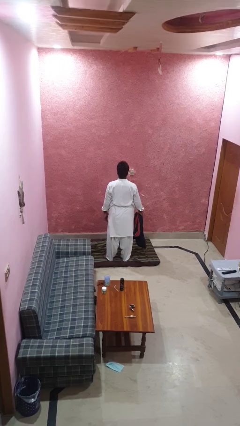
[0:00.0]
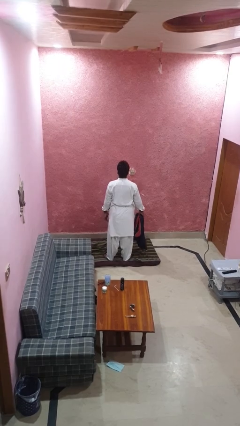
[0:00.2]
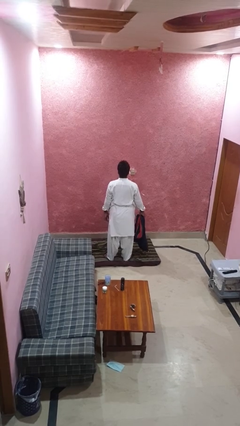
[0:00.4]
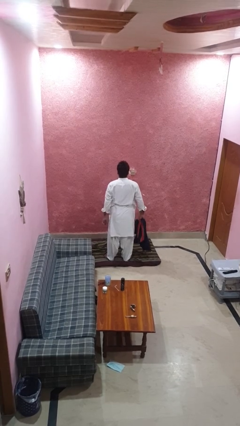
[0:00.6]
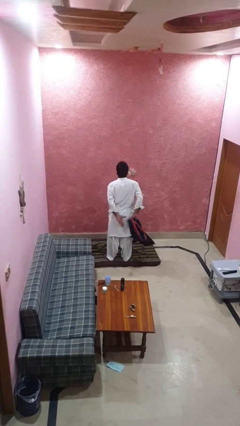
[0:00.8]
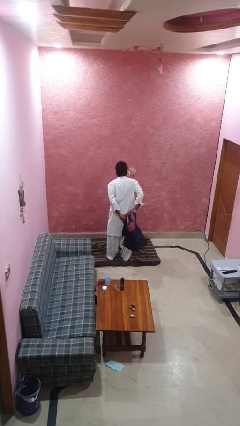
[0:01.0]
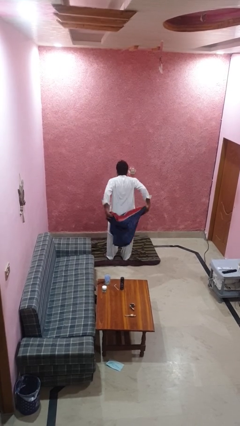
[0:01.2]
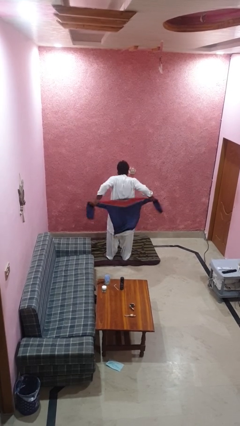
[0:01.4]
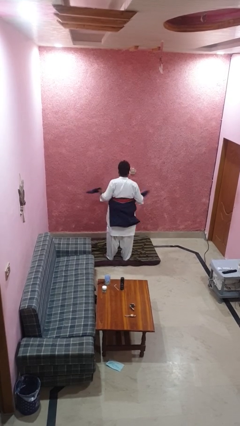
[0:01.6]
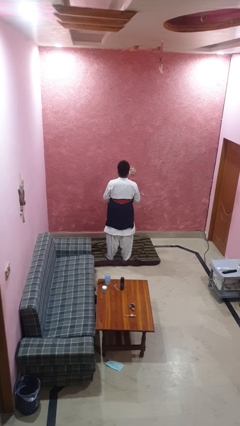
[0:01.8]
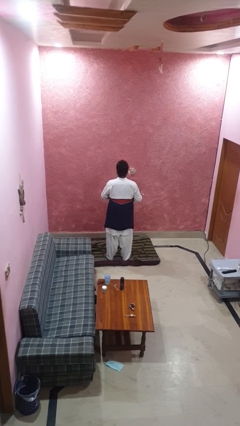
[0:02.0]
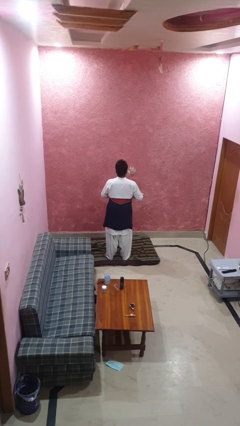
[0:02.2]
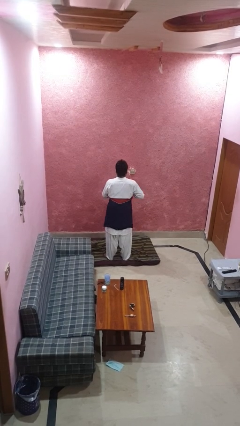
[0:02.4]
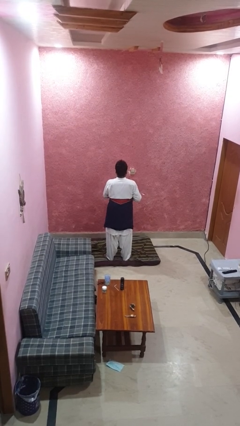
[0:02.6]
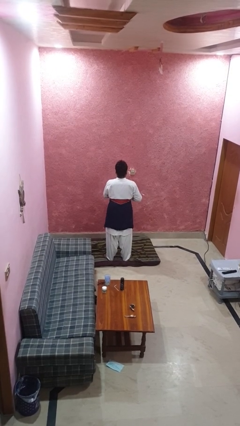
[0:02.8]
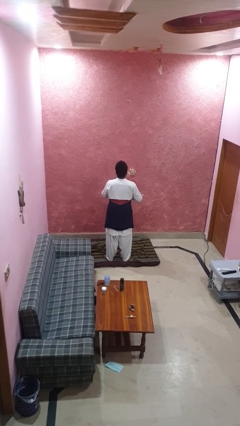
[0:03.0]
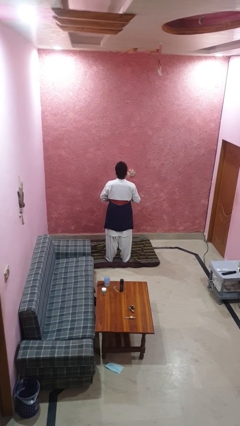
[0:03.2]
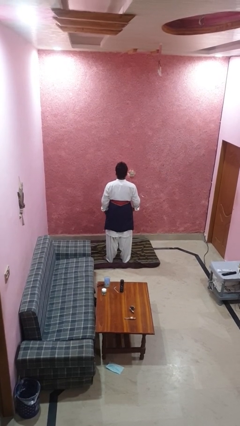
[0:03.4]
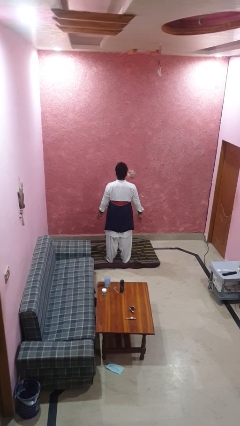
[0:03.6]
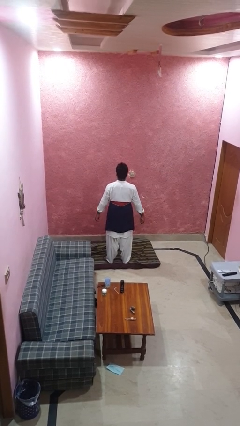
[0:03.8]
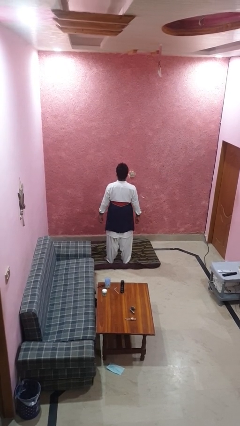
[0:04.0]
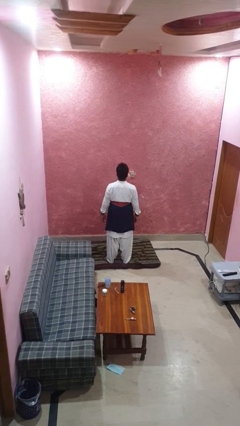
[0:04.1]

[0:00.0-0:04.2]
person ties jacket around waist

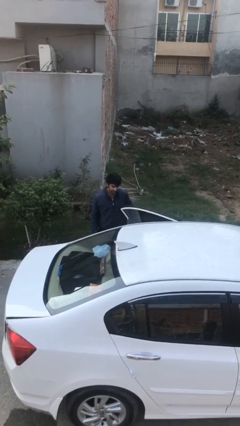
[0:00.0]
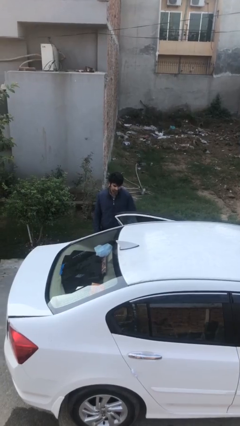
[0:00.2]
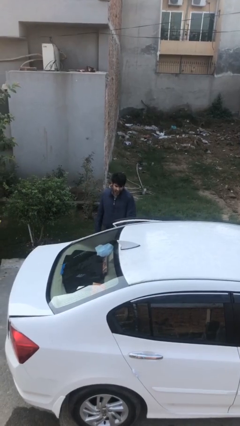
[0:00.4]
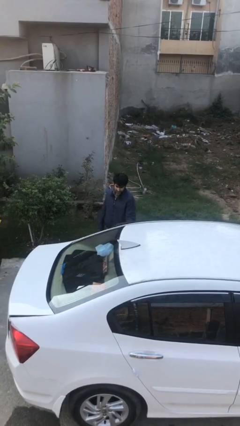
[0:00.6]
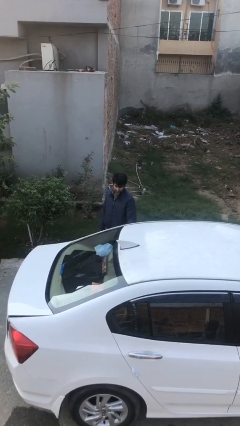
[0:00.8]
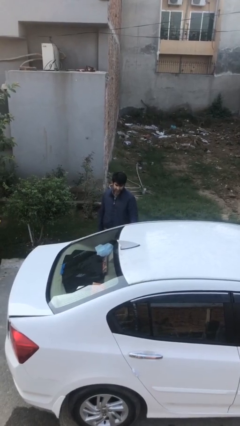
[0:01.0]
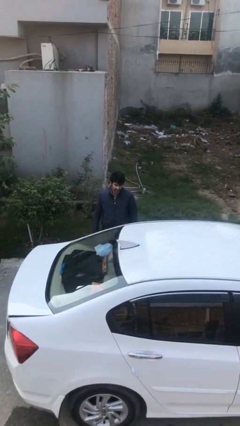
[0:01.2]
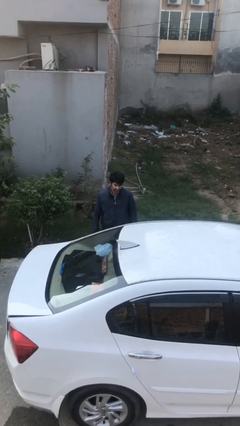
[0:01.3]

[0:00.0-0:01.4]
person closes car door

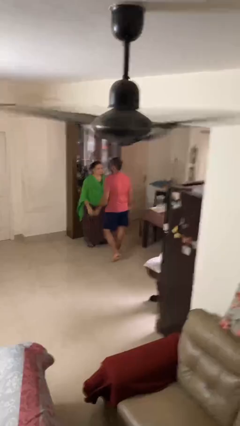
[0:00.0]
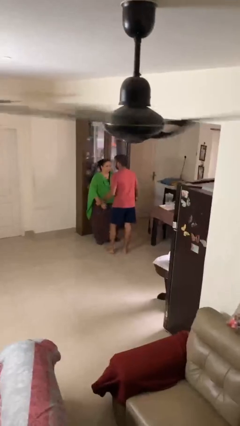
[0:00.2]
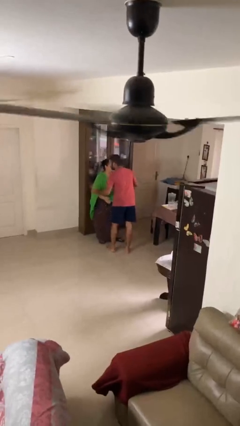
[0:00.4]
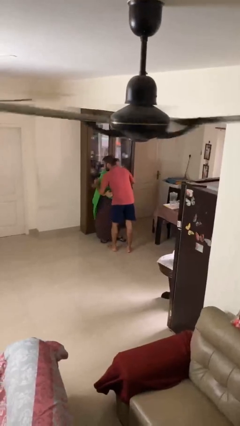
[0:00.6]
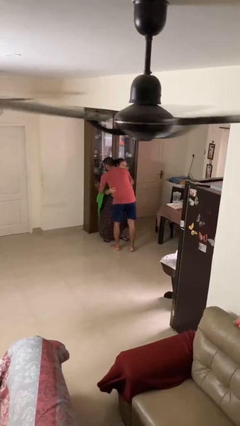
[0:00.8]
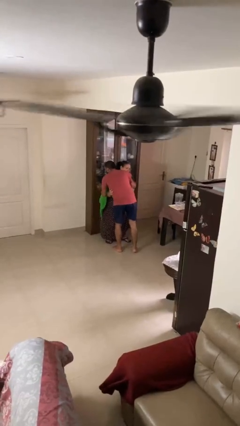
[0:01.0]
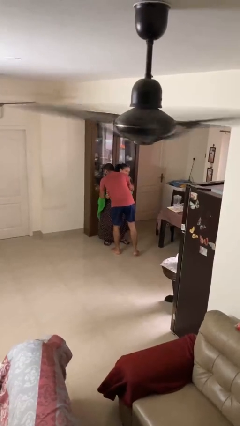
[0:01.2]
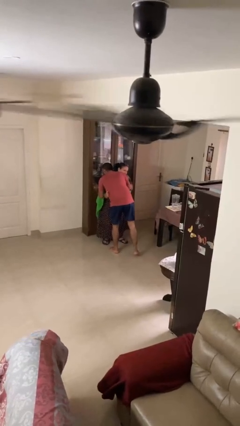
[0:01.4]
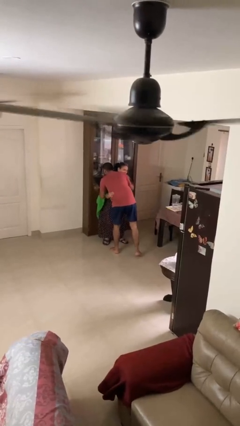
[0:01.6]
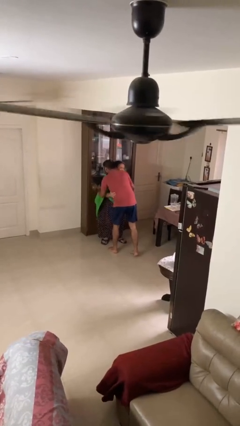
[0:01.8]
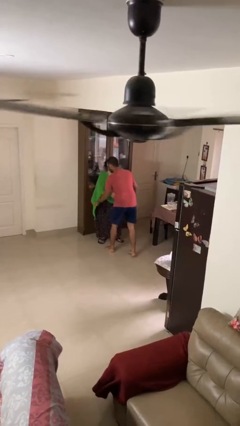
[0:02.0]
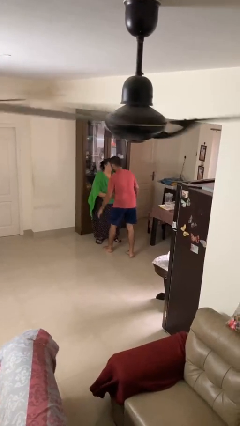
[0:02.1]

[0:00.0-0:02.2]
person embraces person

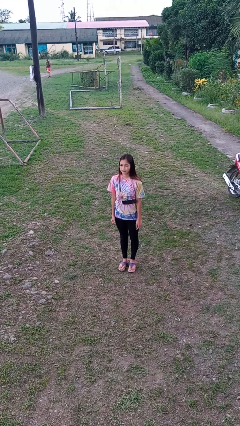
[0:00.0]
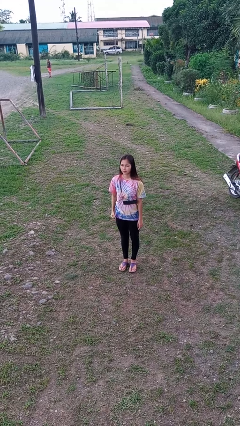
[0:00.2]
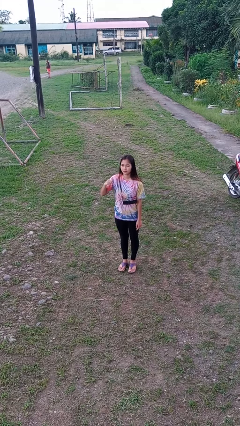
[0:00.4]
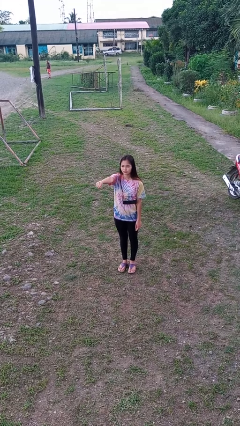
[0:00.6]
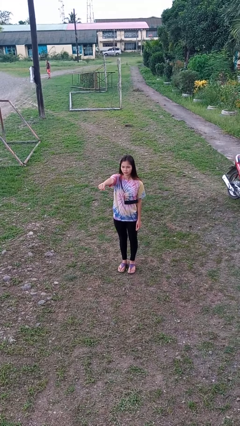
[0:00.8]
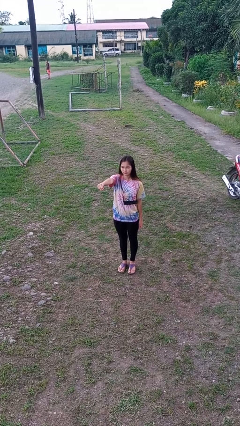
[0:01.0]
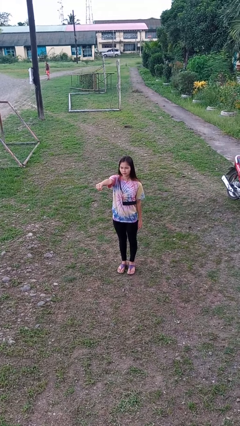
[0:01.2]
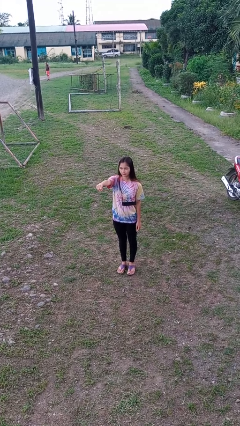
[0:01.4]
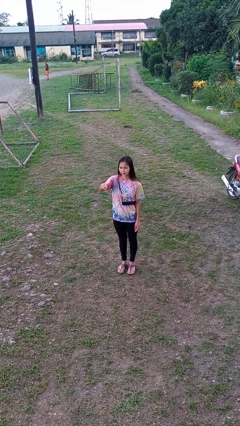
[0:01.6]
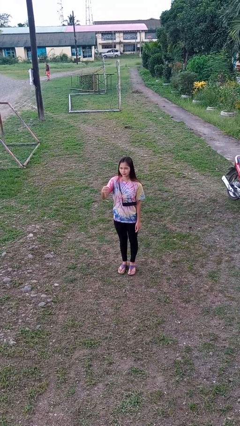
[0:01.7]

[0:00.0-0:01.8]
person punches

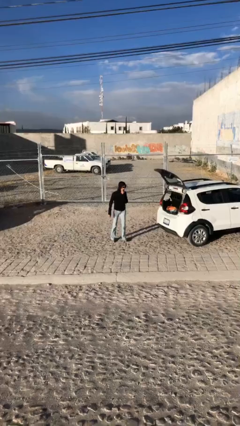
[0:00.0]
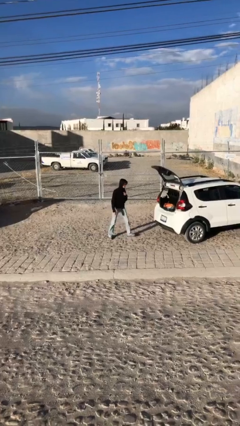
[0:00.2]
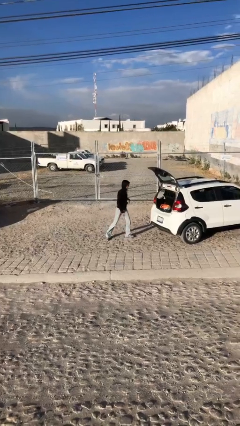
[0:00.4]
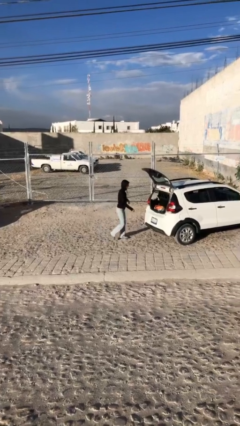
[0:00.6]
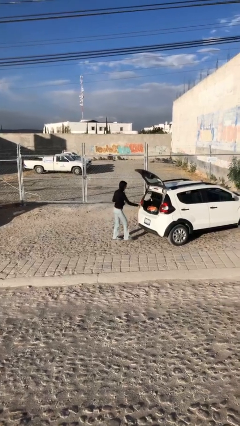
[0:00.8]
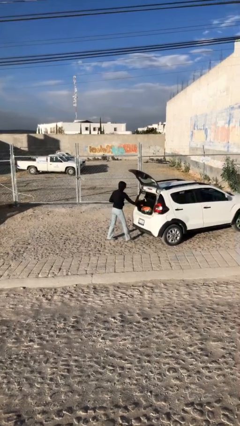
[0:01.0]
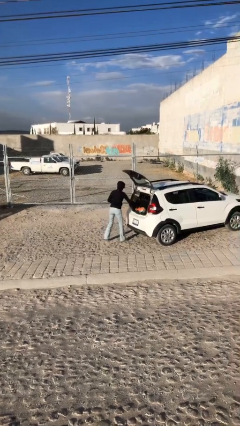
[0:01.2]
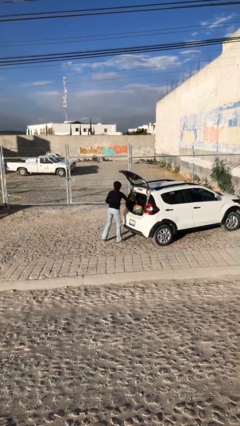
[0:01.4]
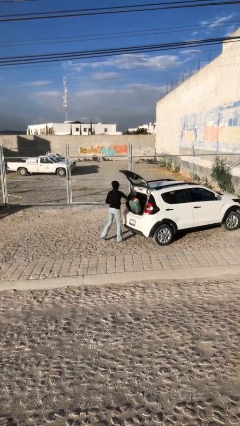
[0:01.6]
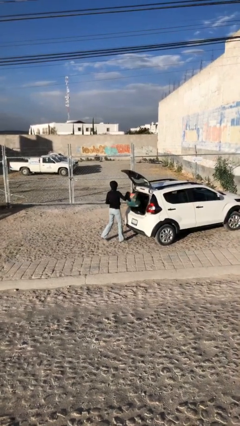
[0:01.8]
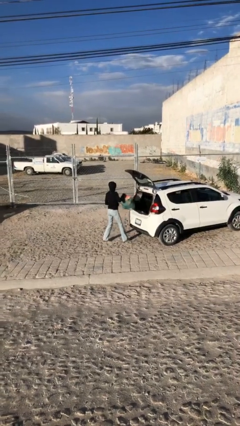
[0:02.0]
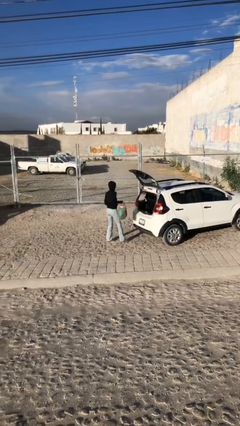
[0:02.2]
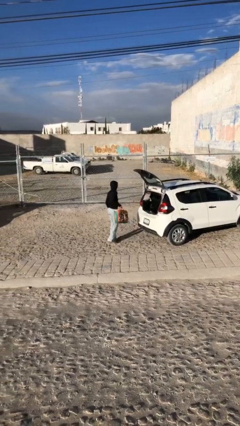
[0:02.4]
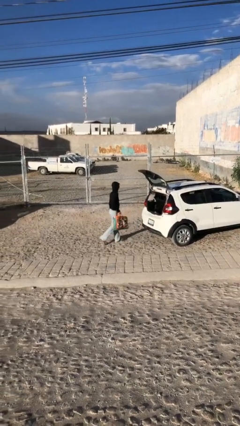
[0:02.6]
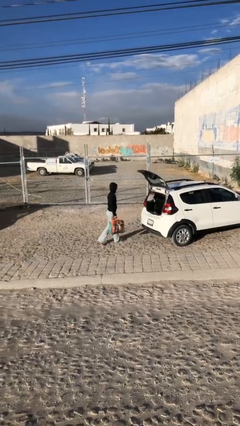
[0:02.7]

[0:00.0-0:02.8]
person unloads car

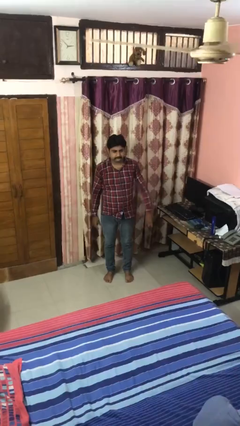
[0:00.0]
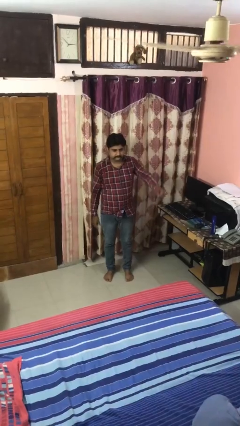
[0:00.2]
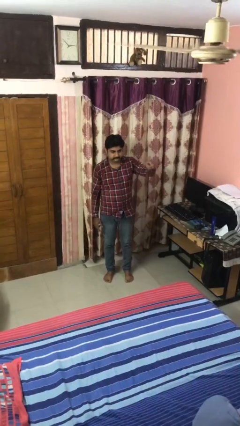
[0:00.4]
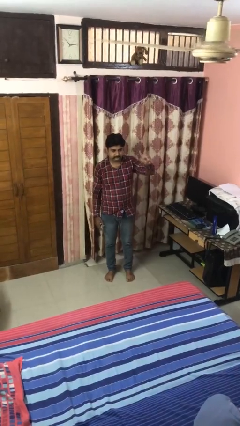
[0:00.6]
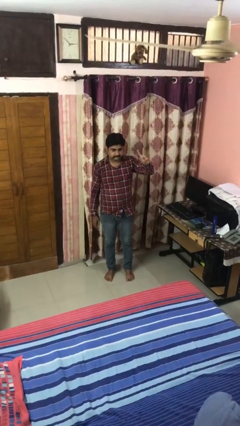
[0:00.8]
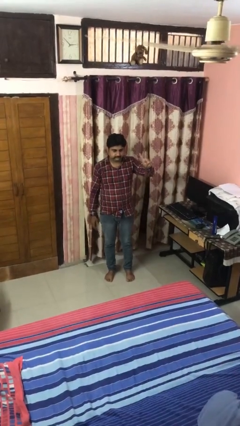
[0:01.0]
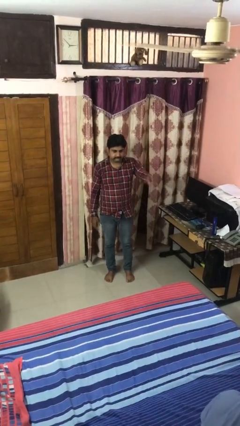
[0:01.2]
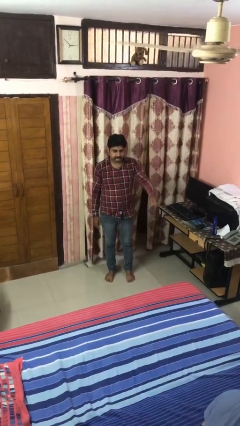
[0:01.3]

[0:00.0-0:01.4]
person gestures peace

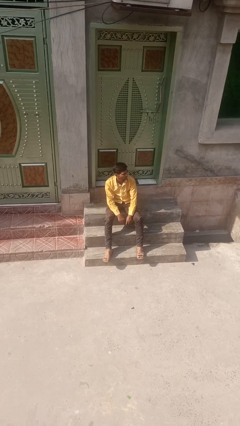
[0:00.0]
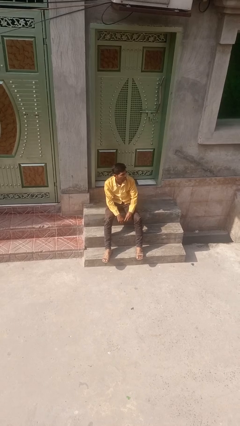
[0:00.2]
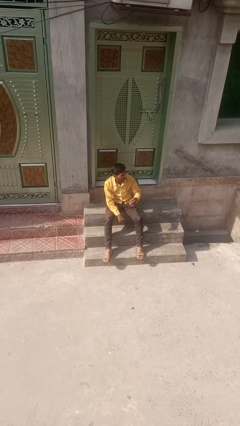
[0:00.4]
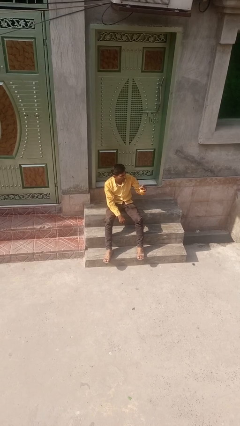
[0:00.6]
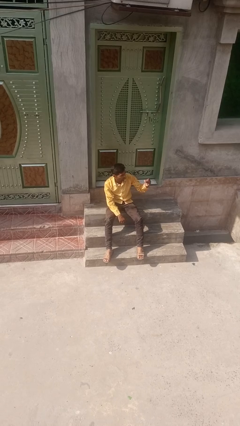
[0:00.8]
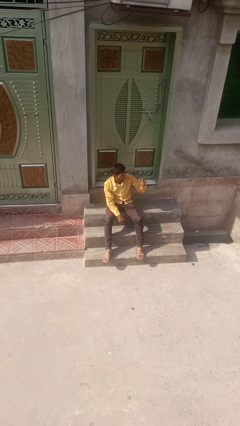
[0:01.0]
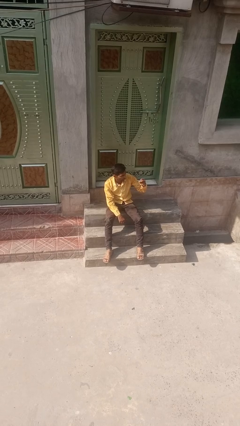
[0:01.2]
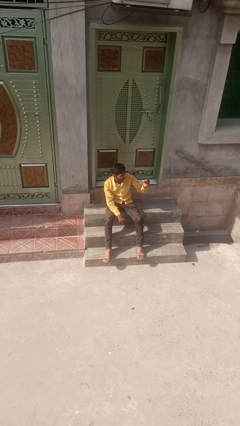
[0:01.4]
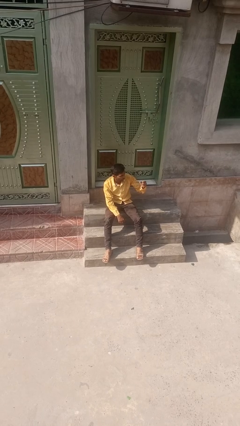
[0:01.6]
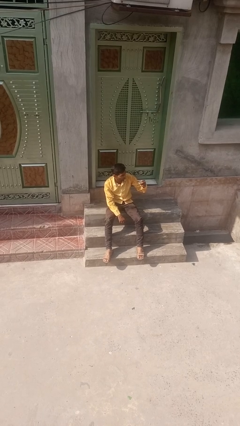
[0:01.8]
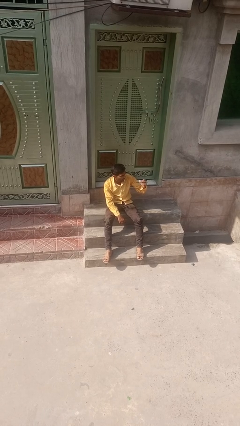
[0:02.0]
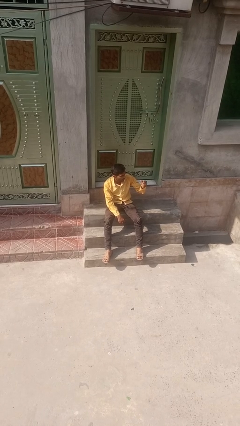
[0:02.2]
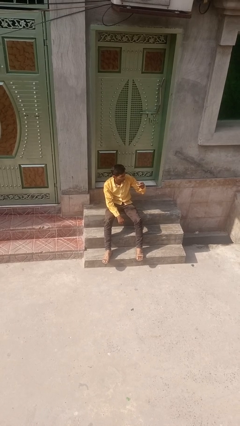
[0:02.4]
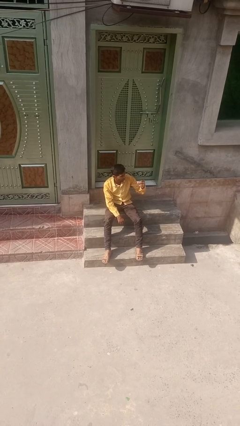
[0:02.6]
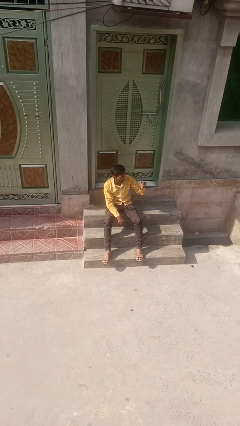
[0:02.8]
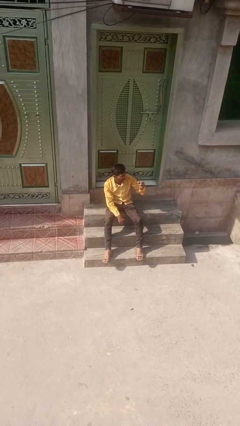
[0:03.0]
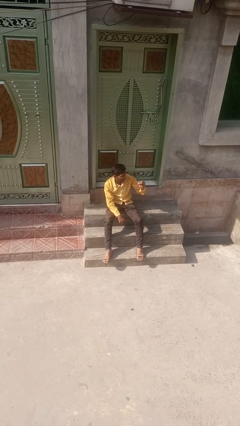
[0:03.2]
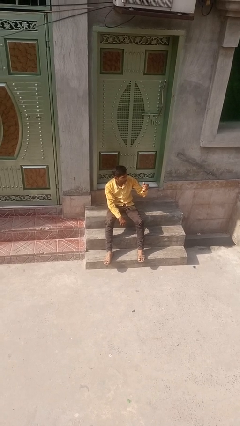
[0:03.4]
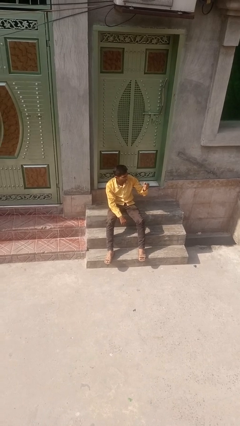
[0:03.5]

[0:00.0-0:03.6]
person snaps fingers
